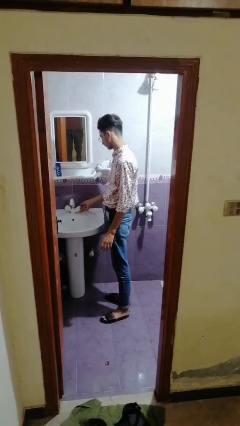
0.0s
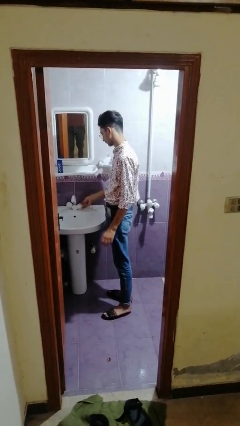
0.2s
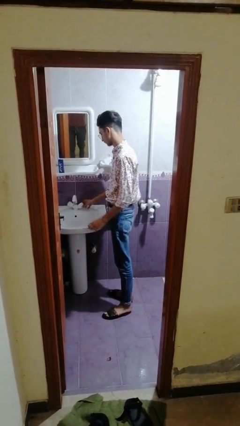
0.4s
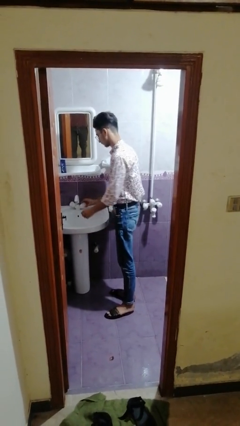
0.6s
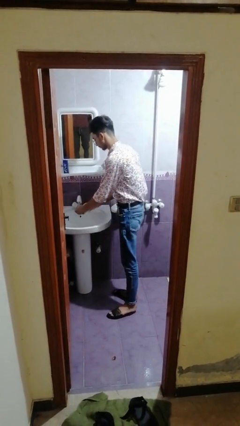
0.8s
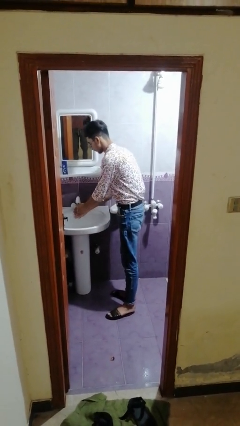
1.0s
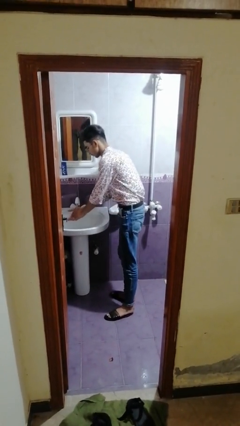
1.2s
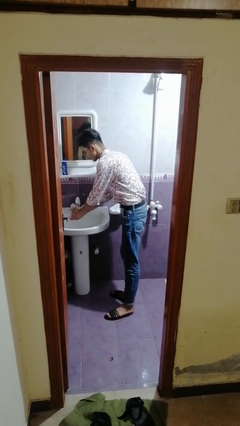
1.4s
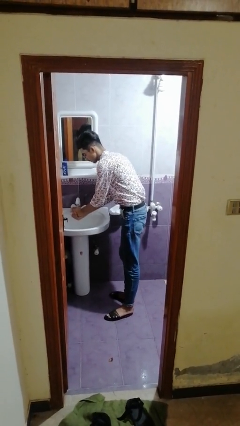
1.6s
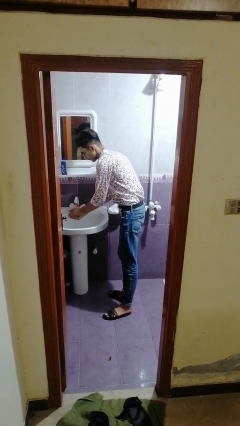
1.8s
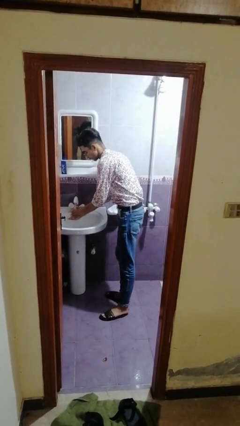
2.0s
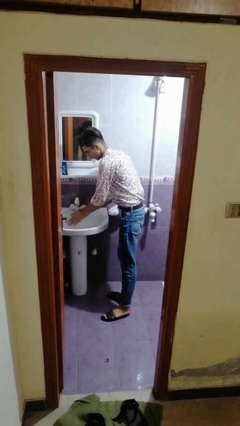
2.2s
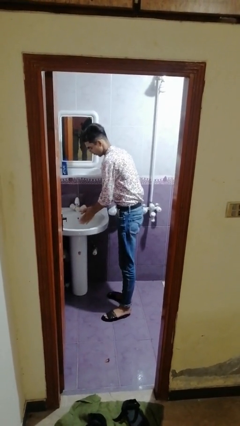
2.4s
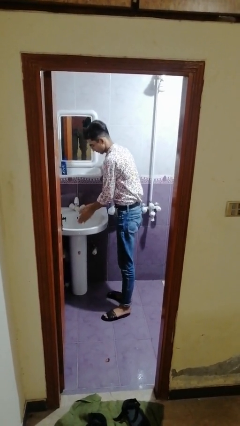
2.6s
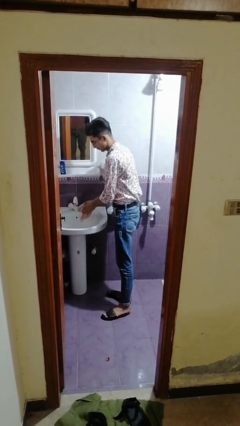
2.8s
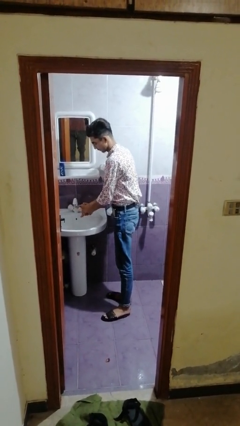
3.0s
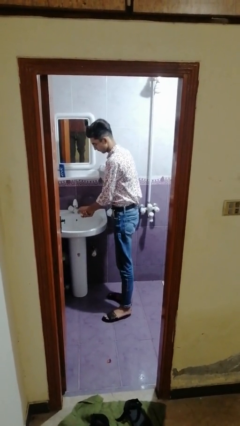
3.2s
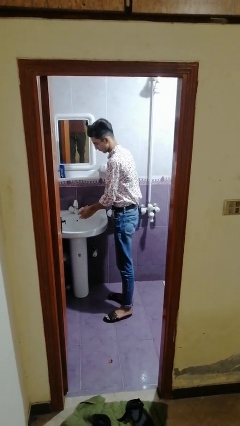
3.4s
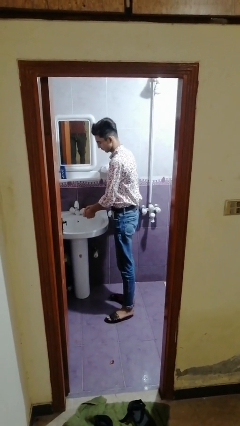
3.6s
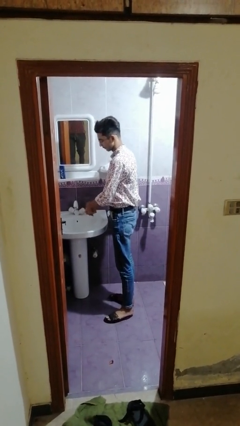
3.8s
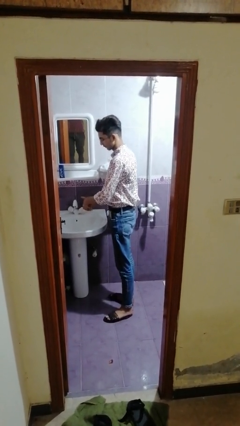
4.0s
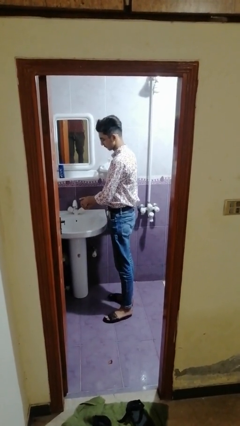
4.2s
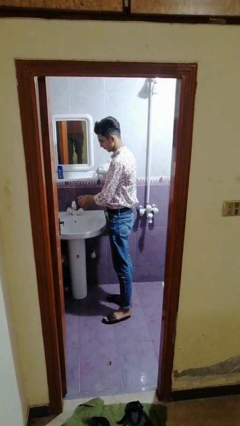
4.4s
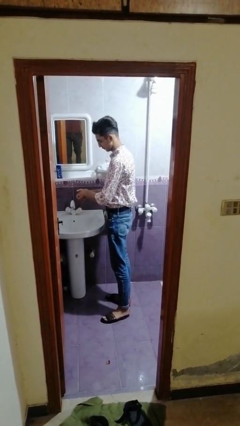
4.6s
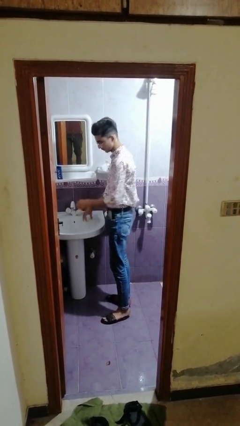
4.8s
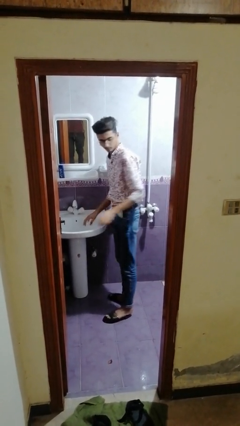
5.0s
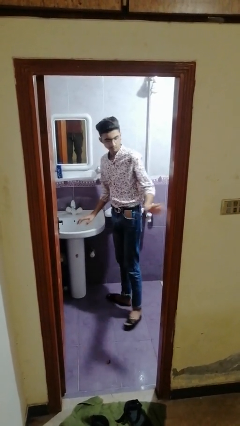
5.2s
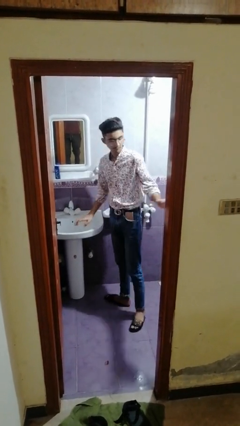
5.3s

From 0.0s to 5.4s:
person washes hands

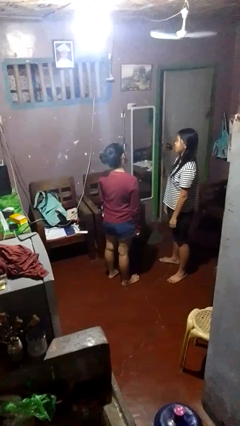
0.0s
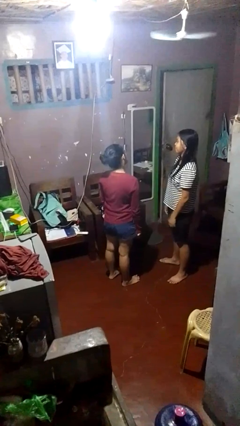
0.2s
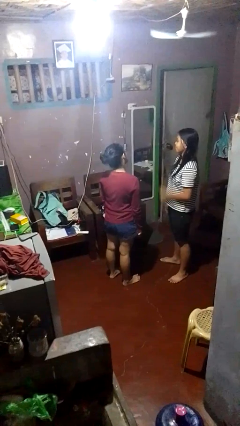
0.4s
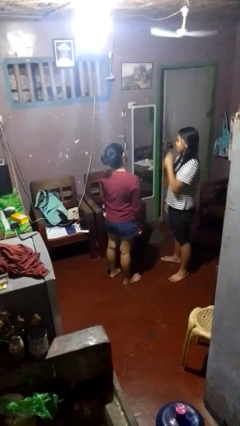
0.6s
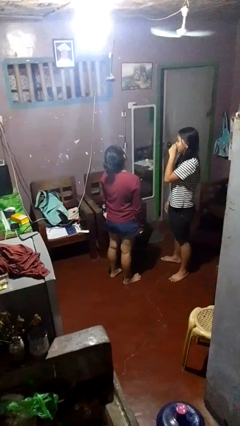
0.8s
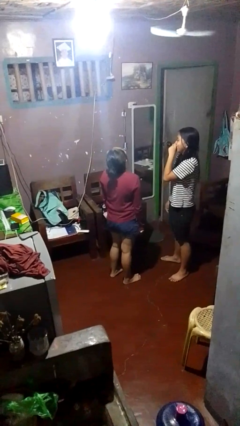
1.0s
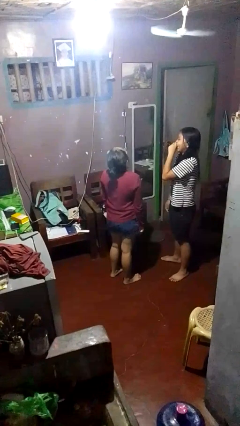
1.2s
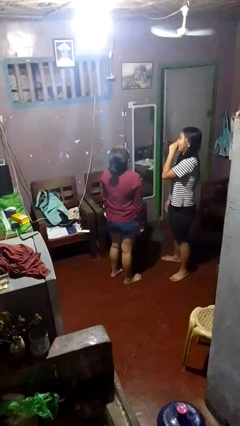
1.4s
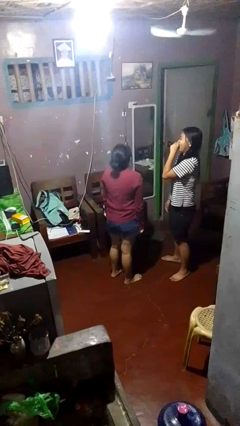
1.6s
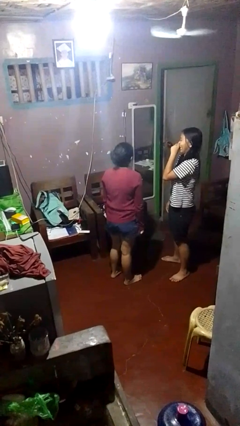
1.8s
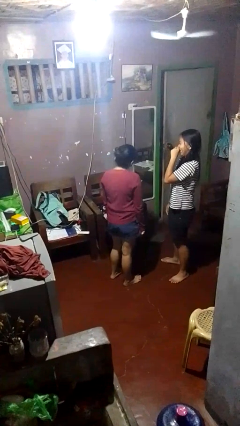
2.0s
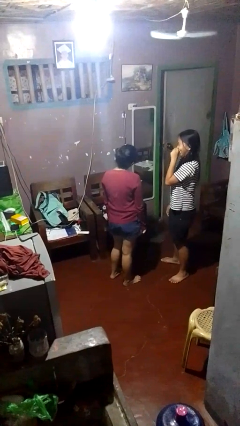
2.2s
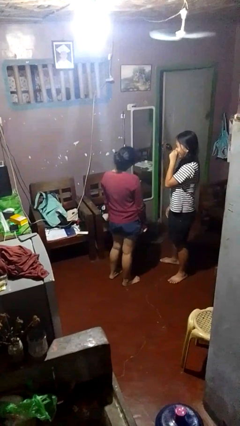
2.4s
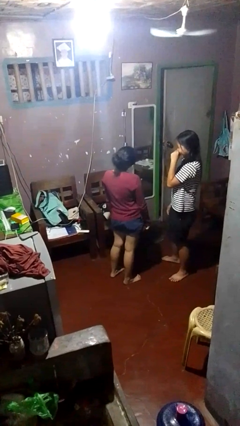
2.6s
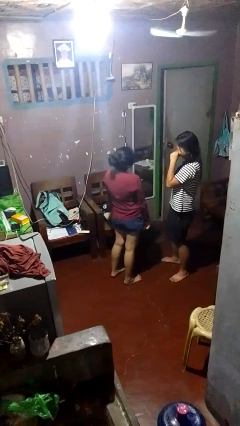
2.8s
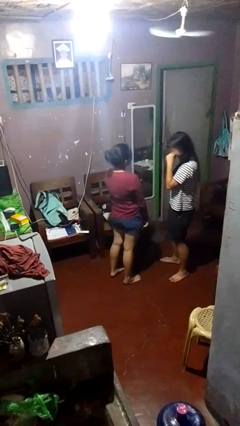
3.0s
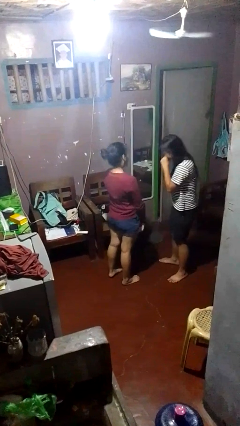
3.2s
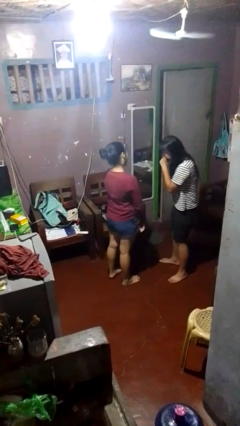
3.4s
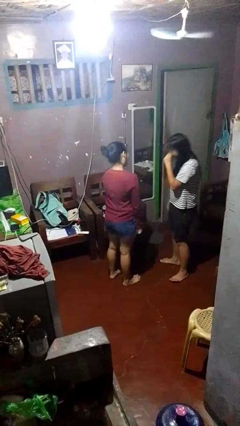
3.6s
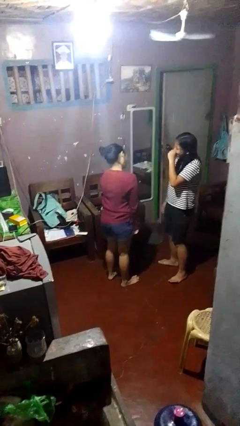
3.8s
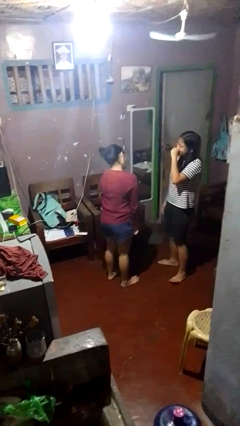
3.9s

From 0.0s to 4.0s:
person laughs with person

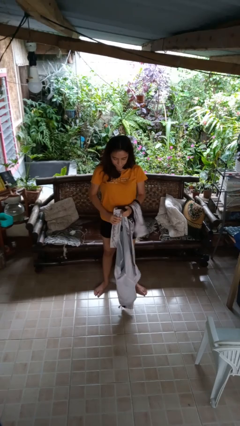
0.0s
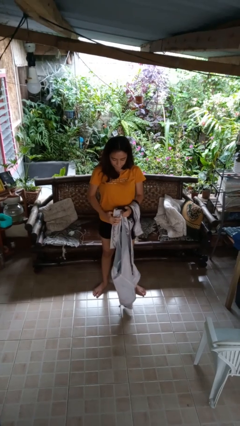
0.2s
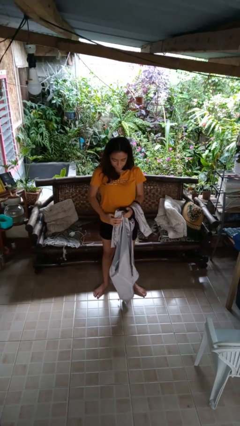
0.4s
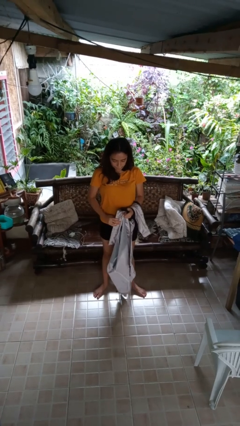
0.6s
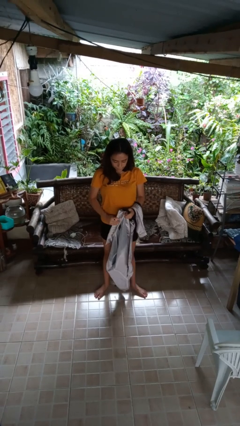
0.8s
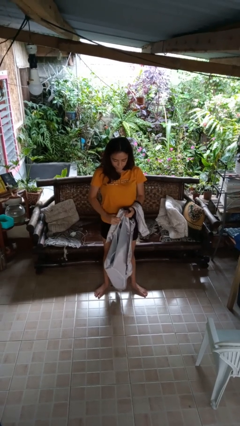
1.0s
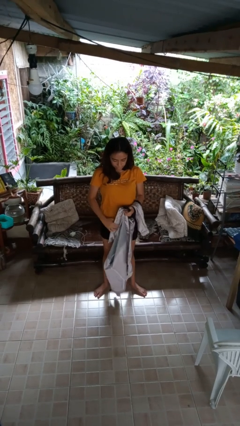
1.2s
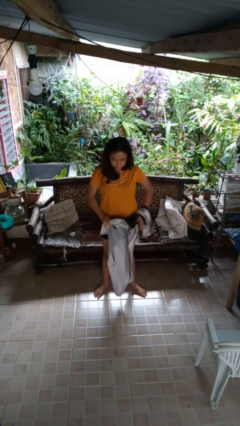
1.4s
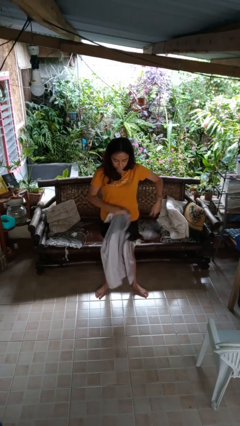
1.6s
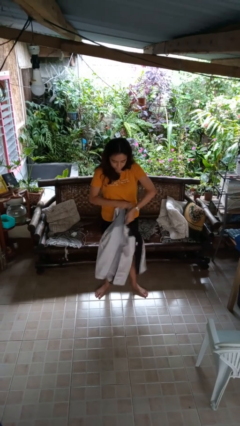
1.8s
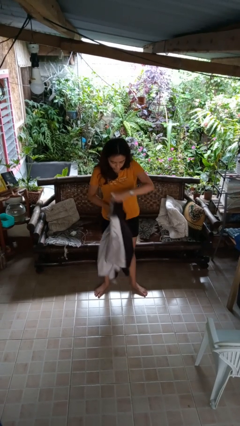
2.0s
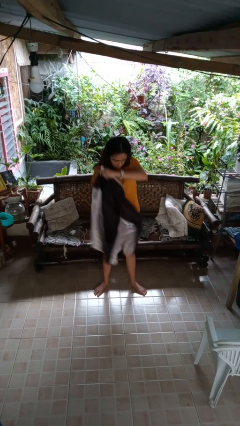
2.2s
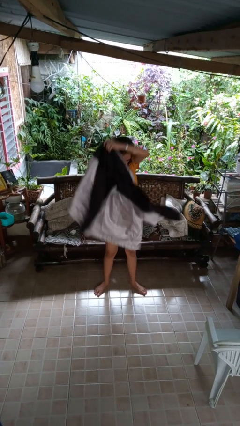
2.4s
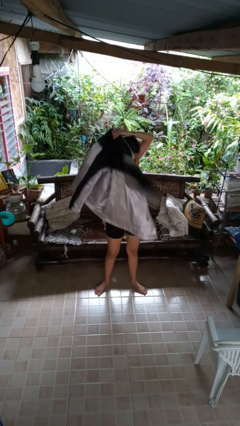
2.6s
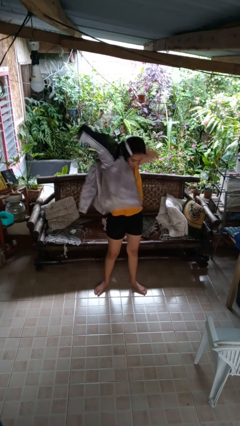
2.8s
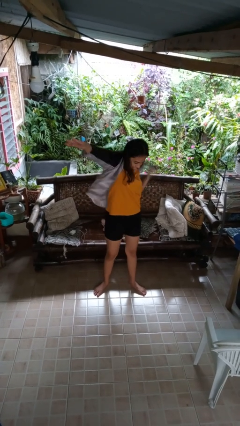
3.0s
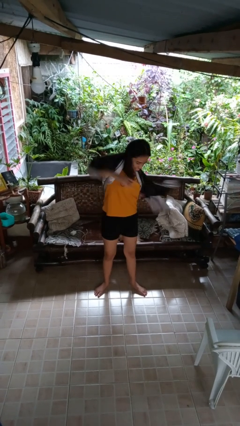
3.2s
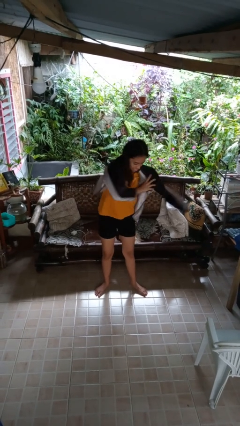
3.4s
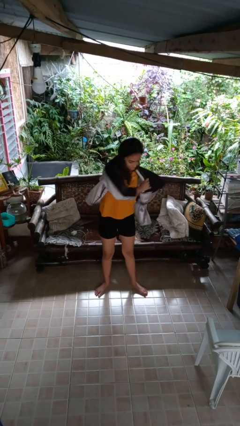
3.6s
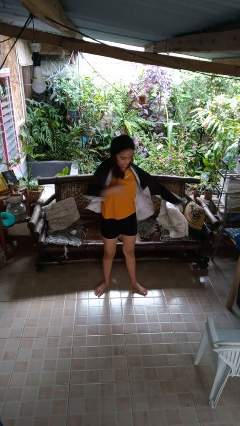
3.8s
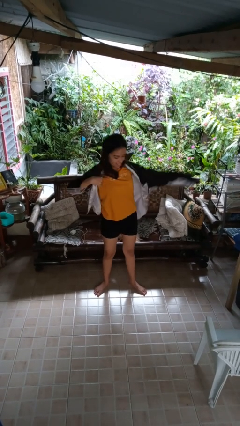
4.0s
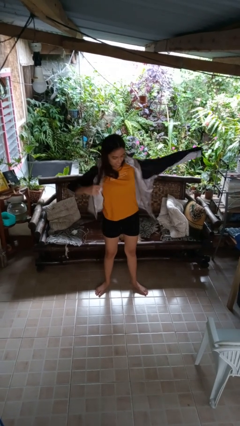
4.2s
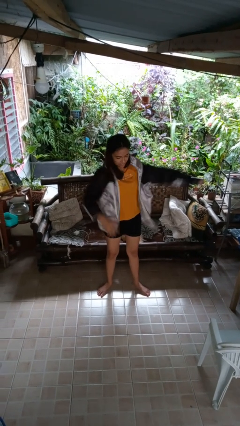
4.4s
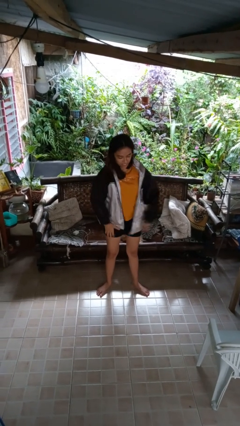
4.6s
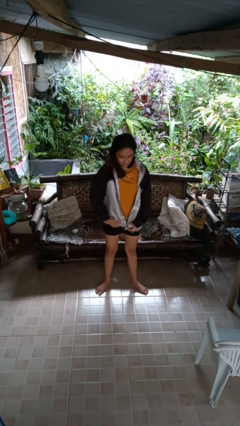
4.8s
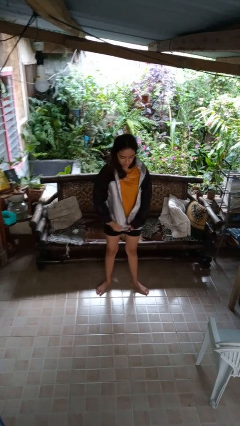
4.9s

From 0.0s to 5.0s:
person puts on jacket

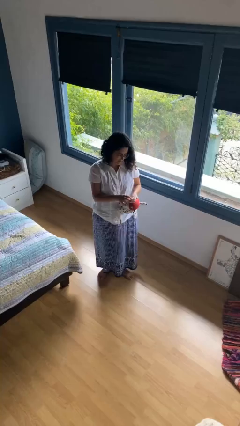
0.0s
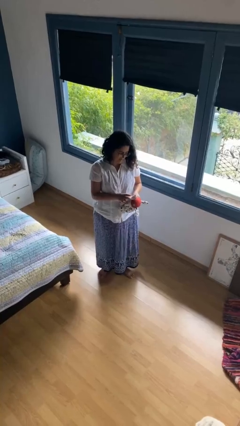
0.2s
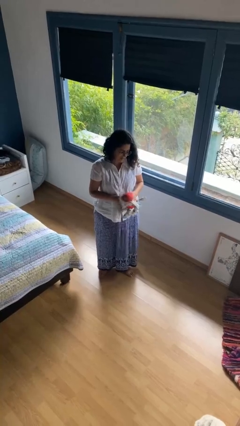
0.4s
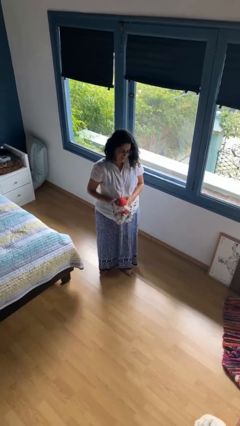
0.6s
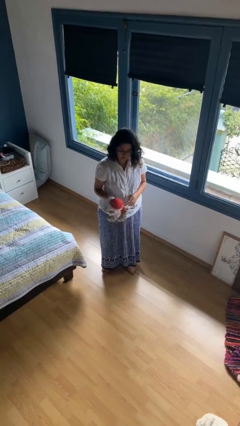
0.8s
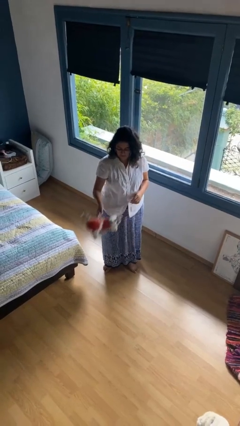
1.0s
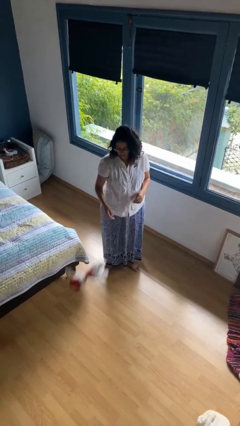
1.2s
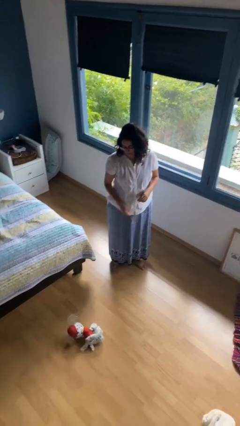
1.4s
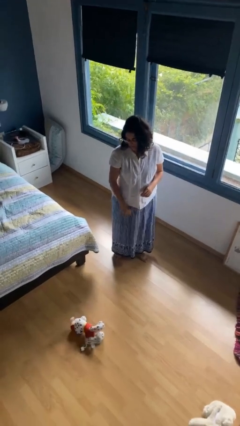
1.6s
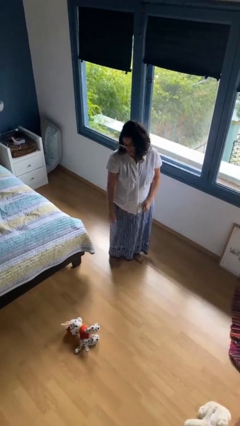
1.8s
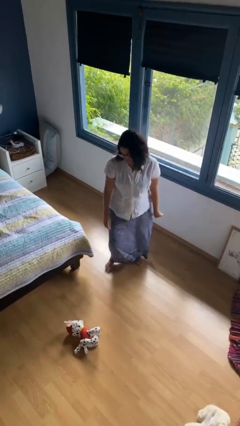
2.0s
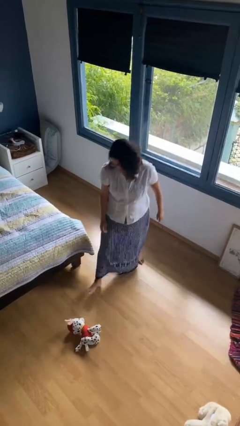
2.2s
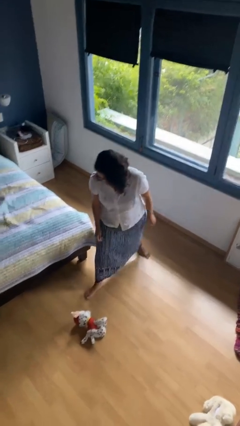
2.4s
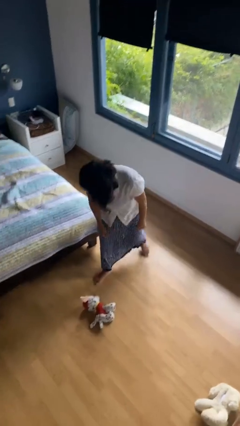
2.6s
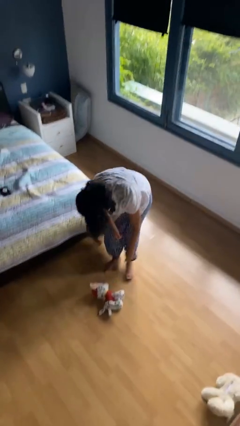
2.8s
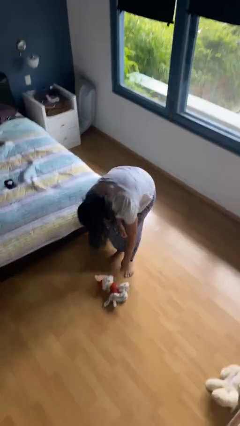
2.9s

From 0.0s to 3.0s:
person throws object to ground

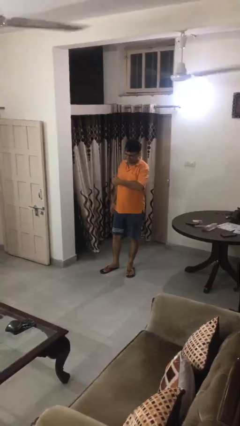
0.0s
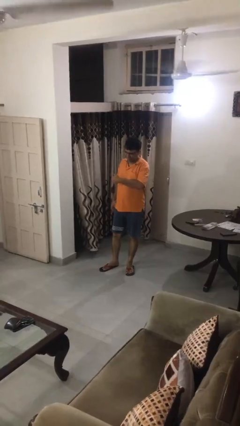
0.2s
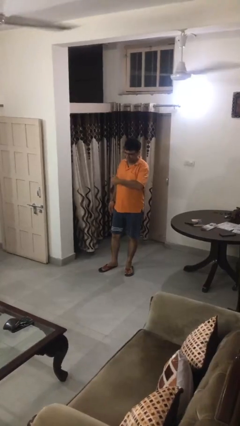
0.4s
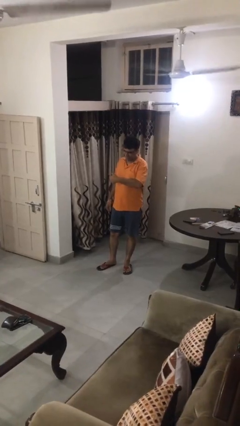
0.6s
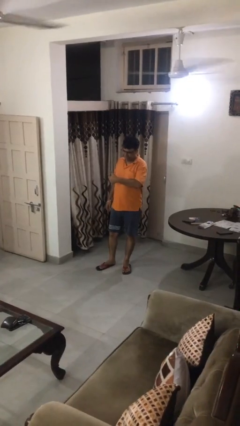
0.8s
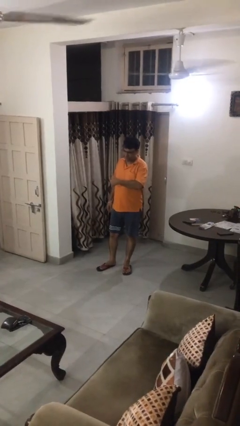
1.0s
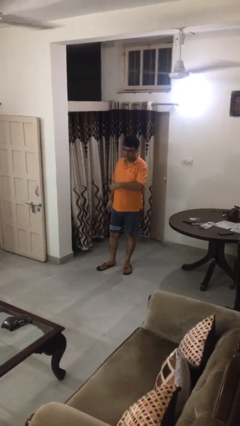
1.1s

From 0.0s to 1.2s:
person gestures thumbs up
